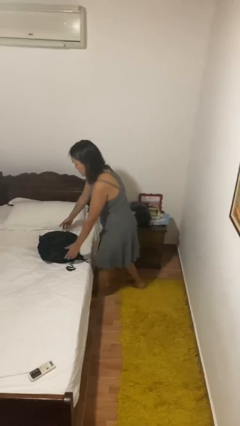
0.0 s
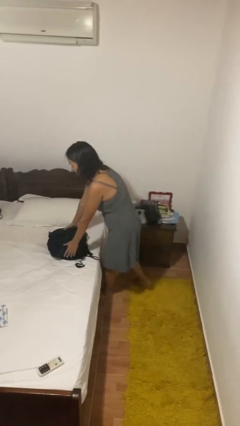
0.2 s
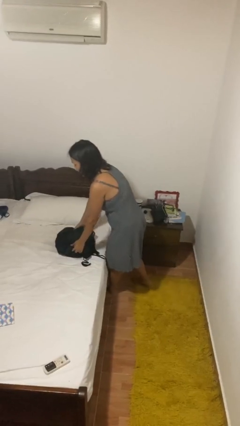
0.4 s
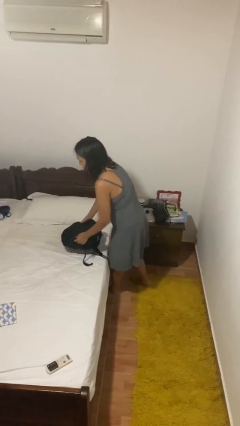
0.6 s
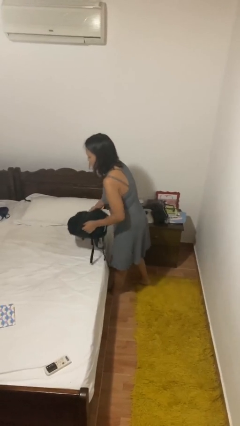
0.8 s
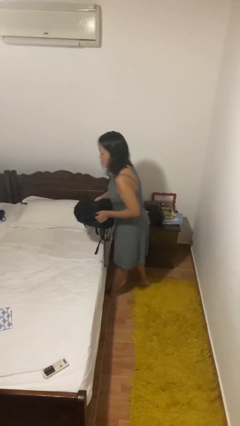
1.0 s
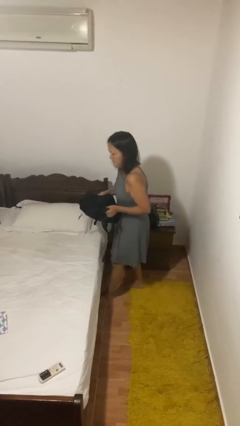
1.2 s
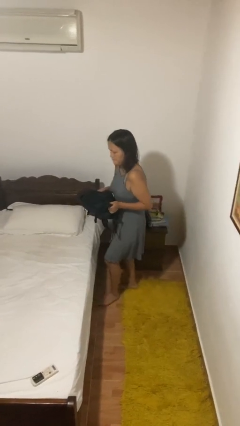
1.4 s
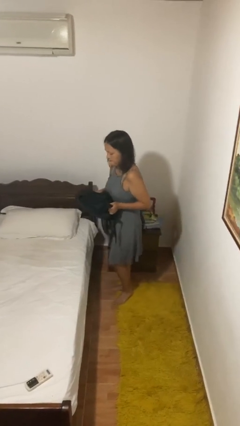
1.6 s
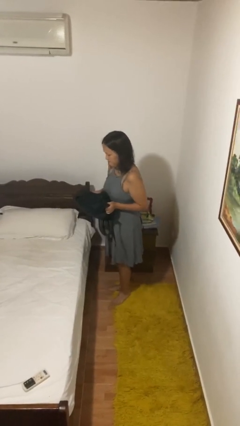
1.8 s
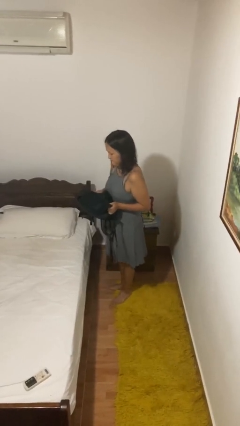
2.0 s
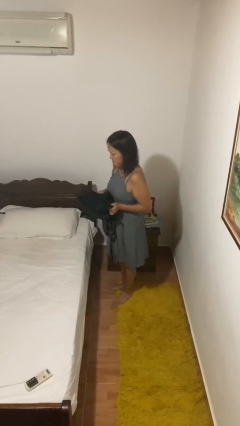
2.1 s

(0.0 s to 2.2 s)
person picks up object from bed

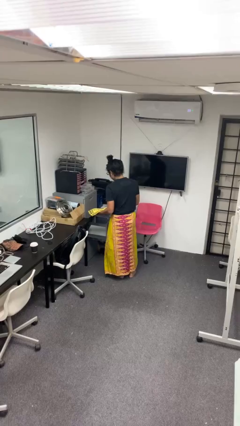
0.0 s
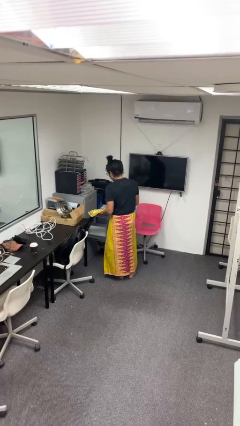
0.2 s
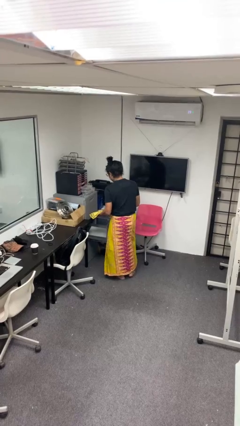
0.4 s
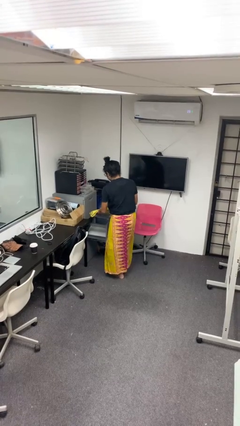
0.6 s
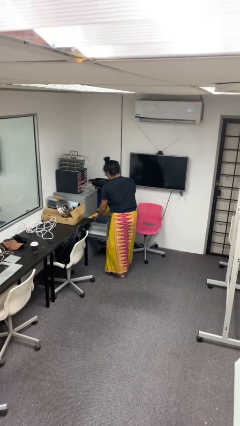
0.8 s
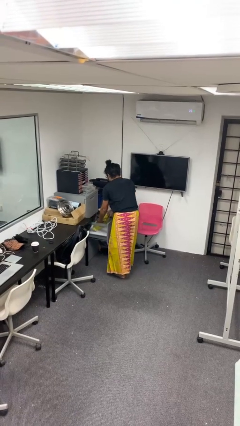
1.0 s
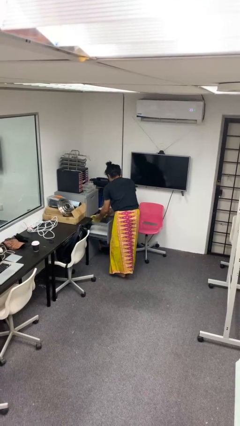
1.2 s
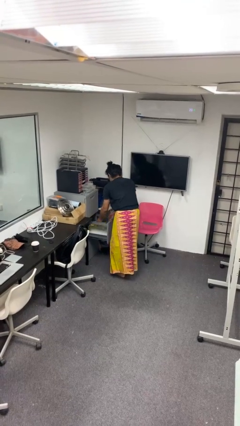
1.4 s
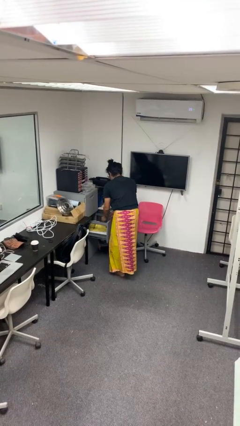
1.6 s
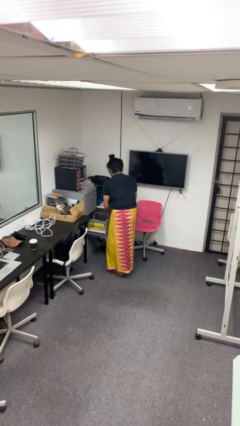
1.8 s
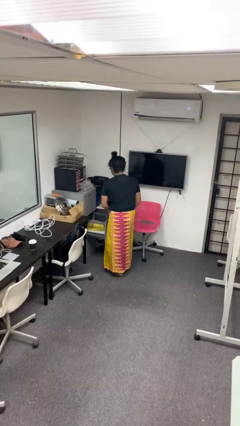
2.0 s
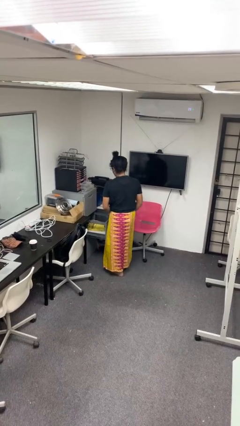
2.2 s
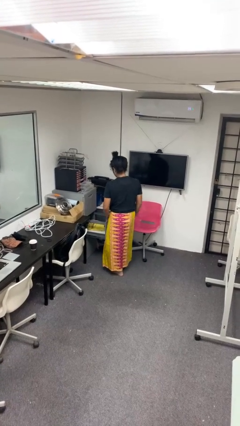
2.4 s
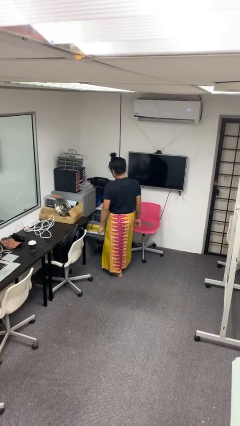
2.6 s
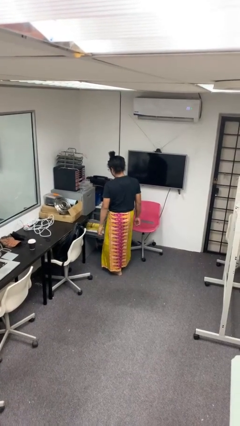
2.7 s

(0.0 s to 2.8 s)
person puts clothes into dresser

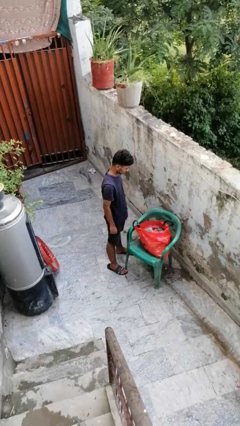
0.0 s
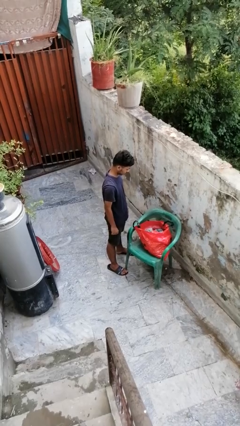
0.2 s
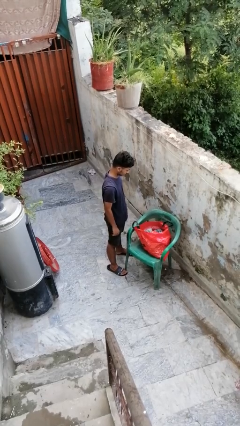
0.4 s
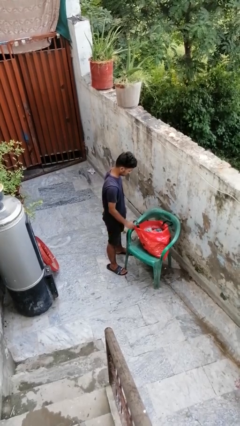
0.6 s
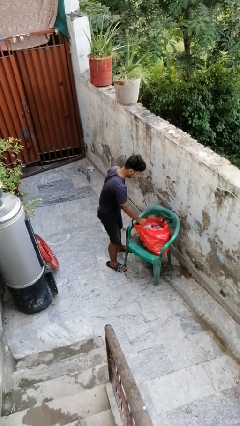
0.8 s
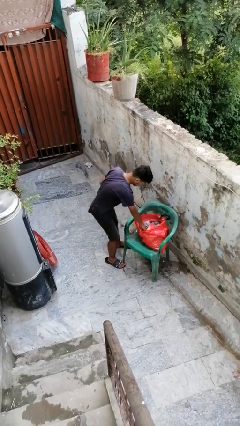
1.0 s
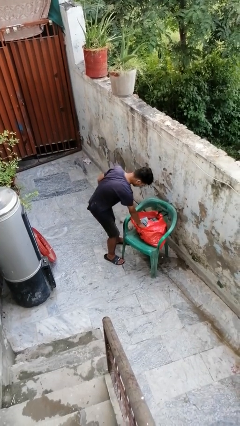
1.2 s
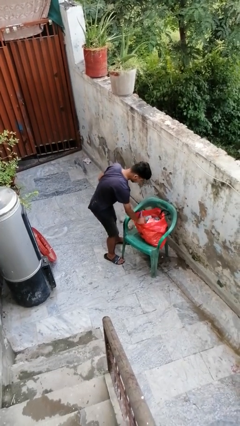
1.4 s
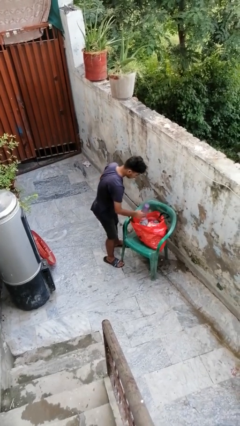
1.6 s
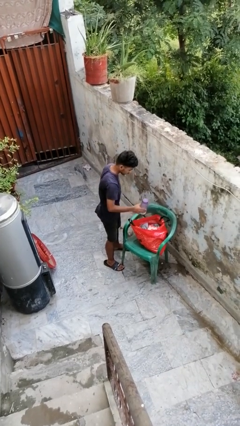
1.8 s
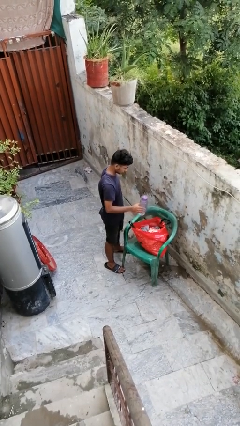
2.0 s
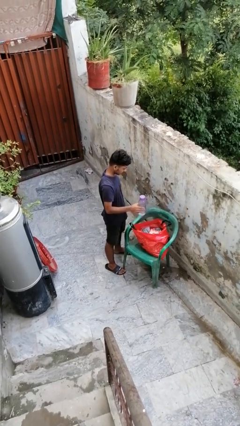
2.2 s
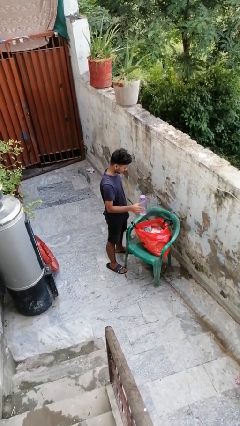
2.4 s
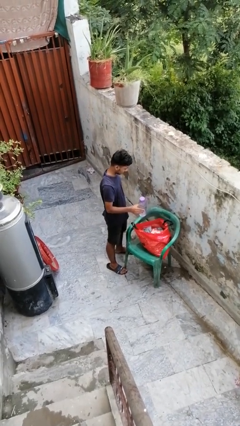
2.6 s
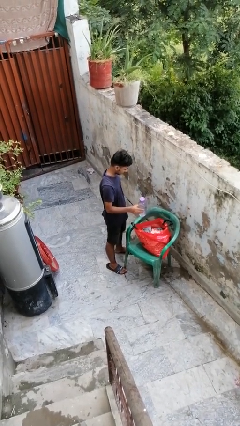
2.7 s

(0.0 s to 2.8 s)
person takes object from bag

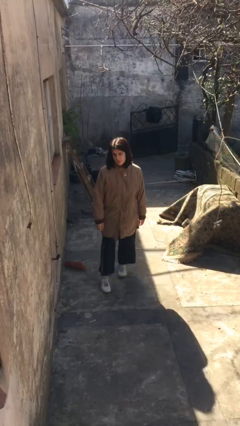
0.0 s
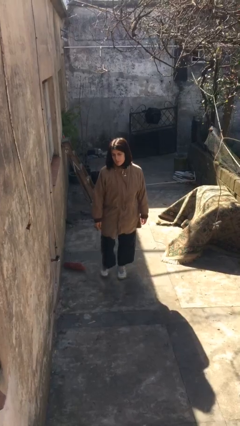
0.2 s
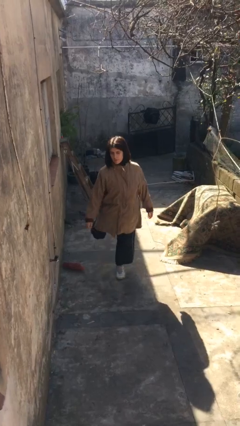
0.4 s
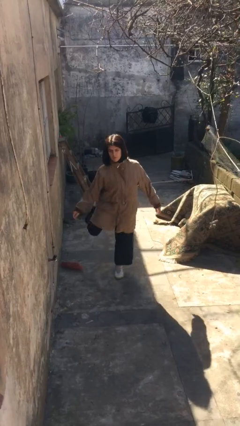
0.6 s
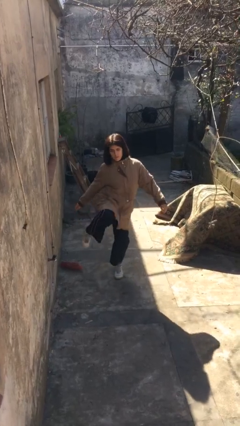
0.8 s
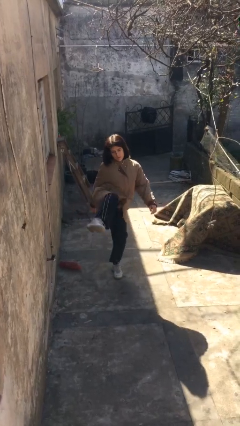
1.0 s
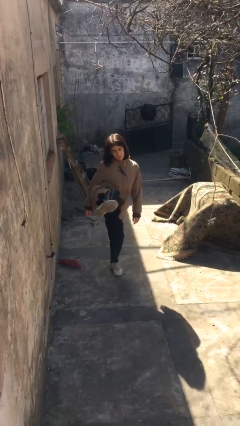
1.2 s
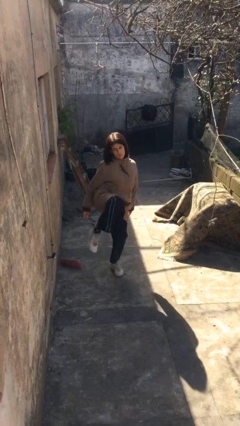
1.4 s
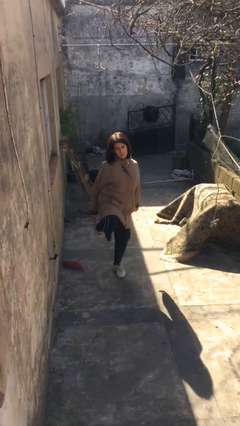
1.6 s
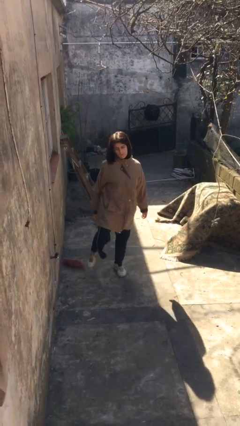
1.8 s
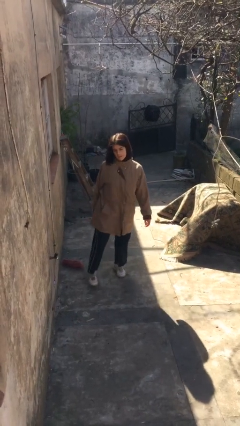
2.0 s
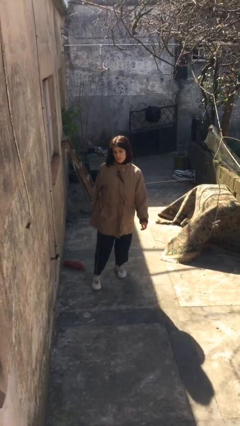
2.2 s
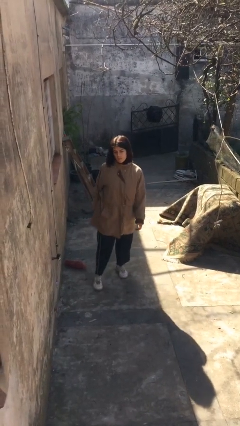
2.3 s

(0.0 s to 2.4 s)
person karate kicks

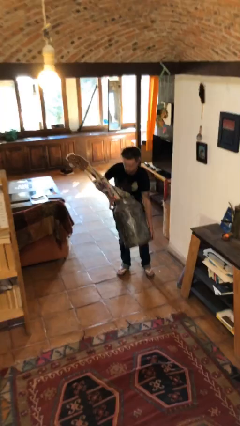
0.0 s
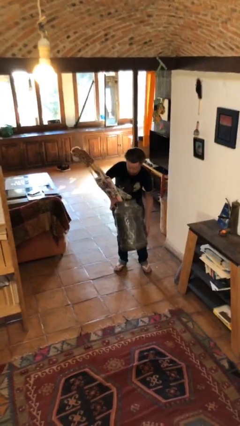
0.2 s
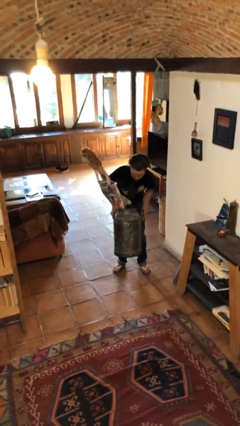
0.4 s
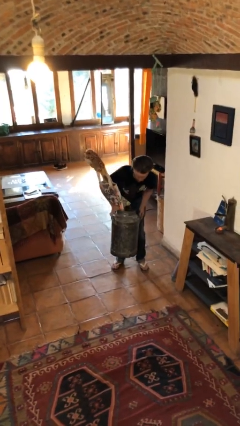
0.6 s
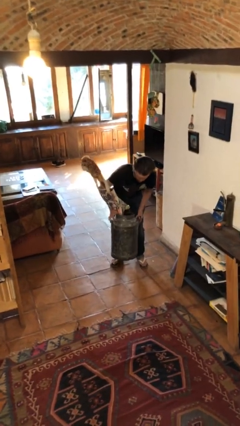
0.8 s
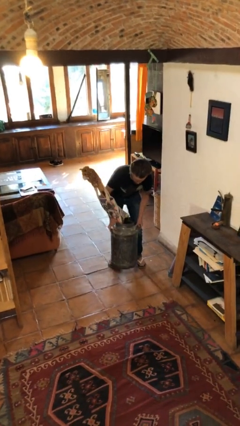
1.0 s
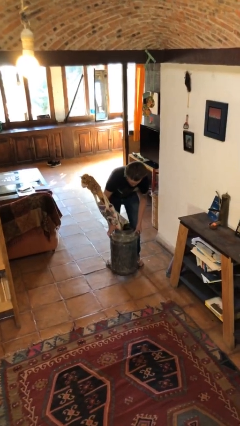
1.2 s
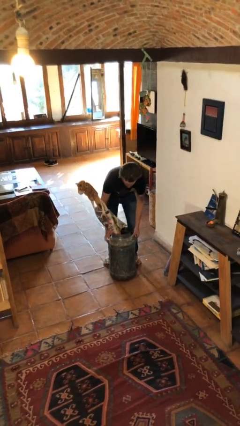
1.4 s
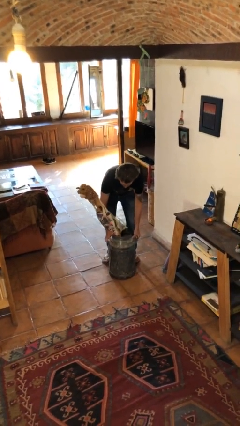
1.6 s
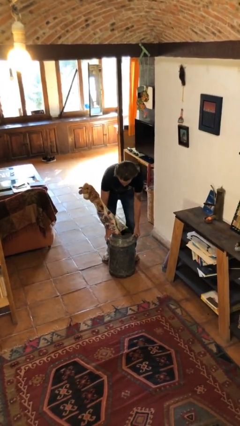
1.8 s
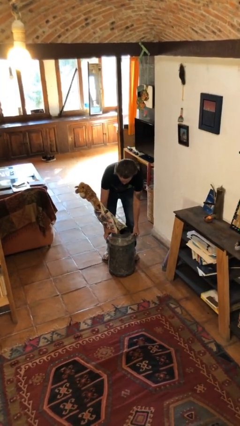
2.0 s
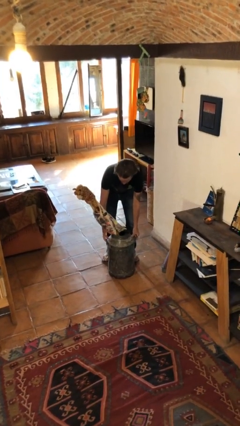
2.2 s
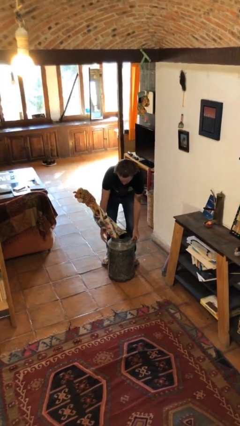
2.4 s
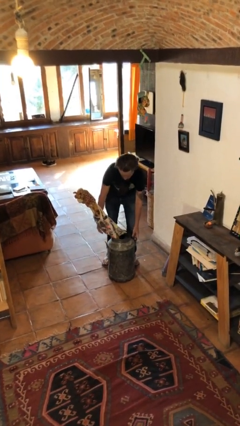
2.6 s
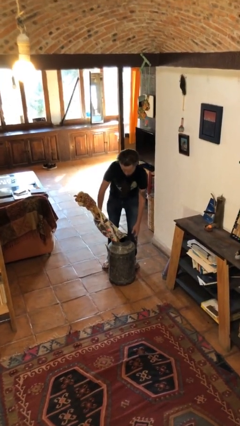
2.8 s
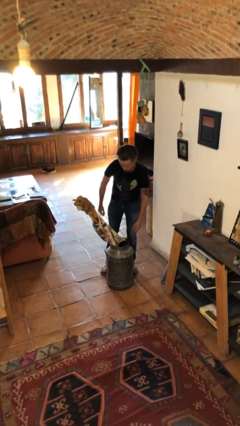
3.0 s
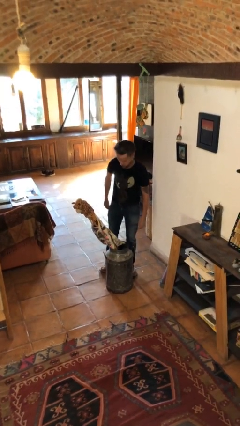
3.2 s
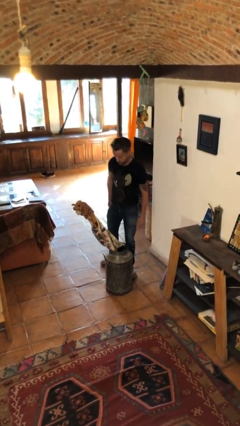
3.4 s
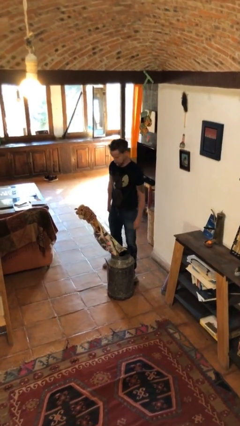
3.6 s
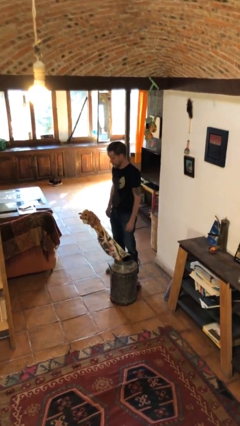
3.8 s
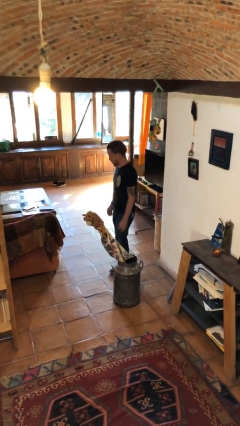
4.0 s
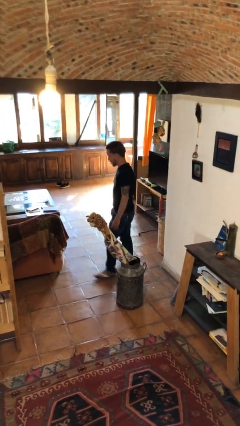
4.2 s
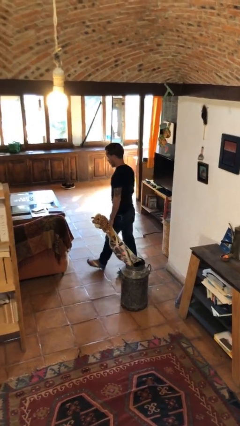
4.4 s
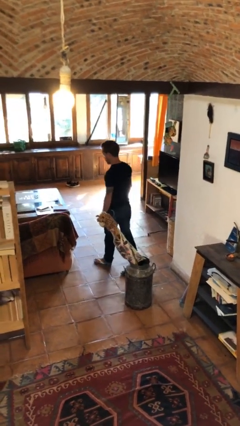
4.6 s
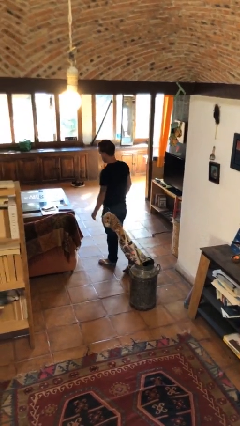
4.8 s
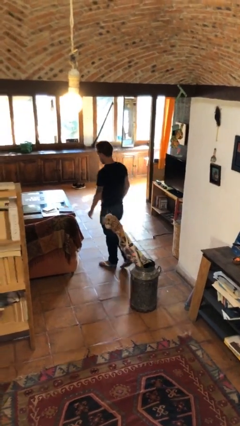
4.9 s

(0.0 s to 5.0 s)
person puts down object on floor

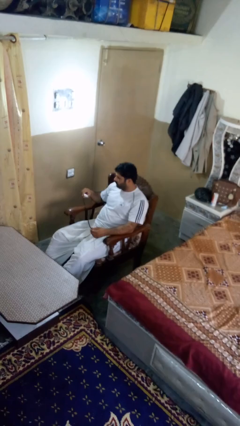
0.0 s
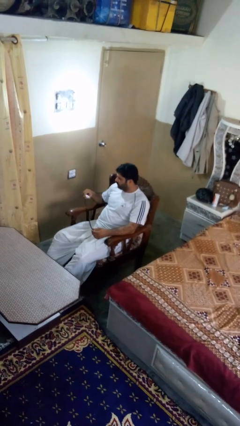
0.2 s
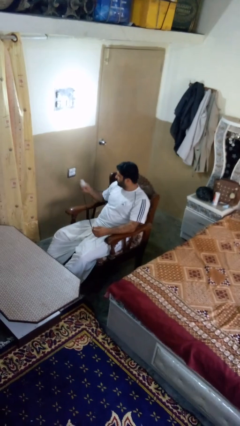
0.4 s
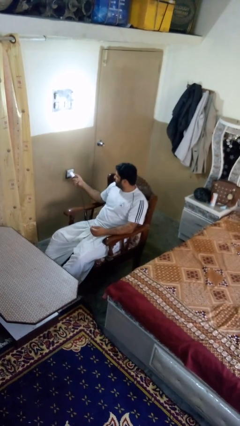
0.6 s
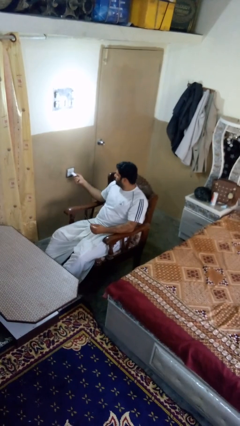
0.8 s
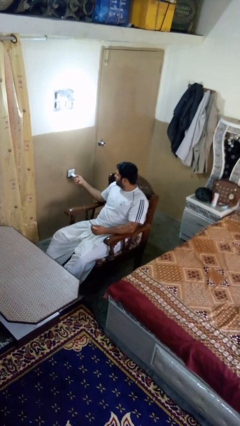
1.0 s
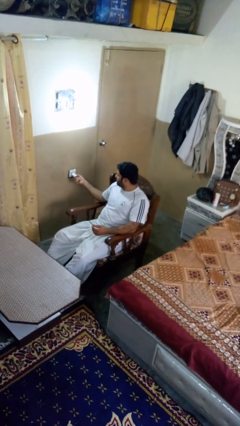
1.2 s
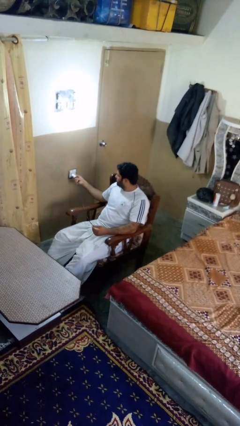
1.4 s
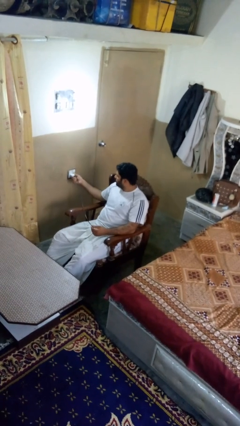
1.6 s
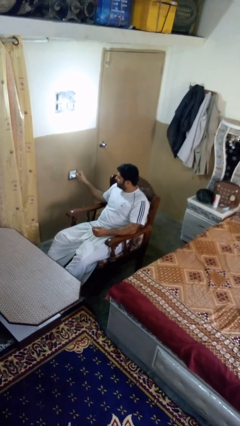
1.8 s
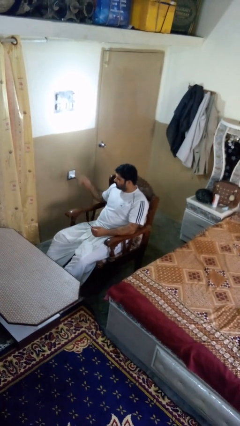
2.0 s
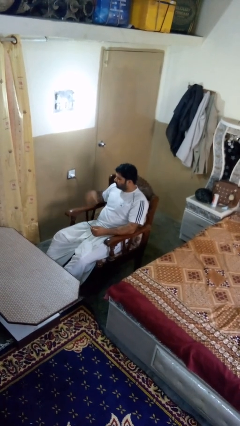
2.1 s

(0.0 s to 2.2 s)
person plugs into electrical socket
